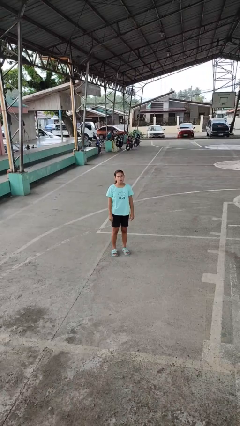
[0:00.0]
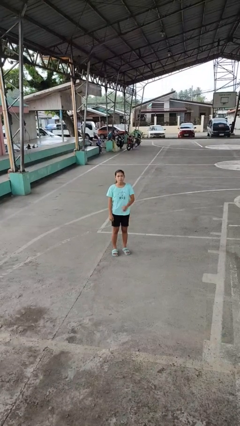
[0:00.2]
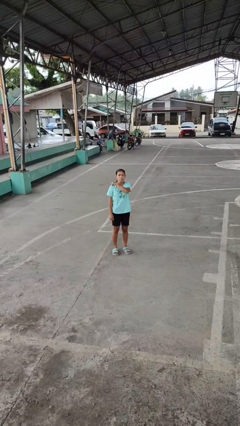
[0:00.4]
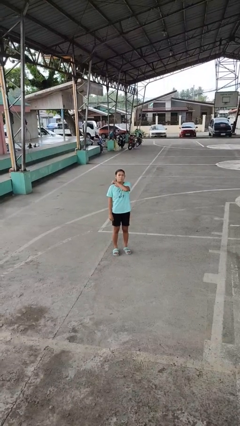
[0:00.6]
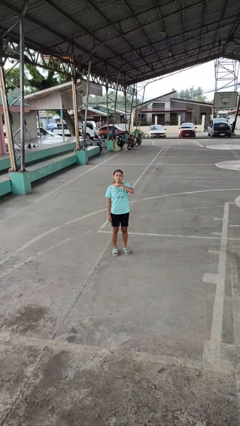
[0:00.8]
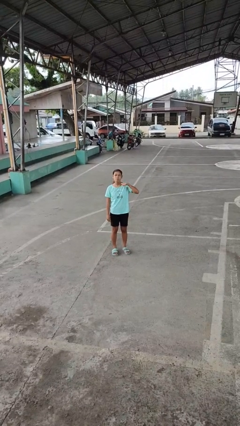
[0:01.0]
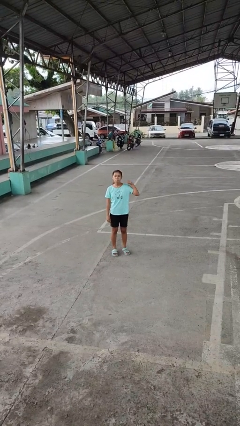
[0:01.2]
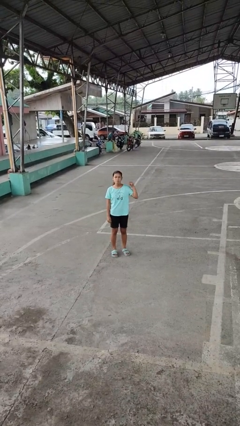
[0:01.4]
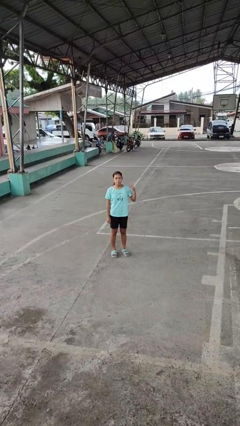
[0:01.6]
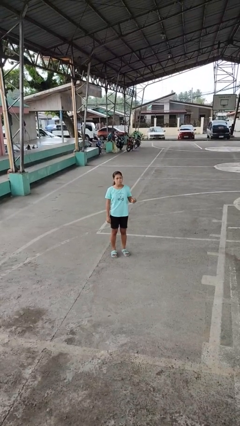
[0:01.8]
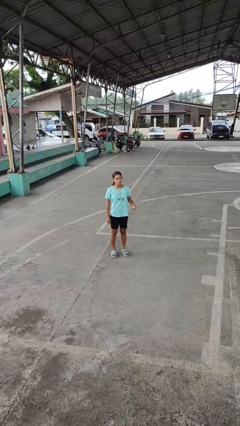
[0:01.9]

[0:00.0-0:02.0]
person gestures cut

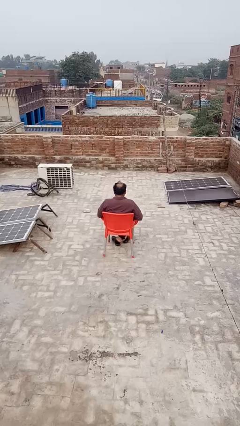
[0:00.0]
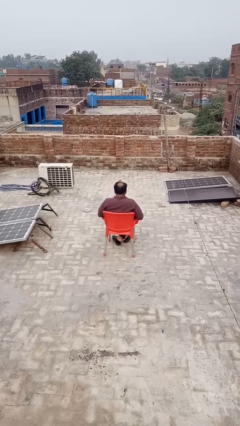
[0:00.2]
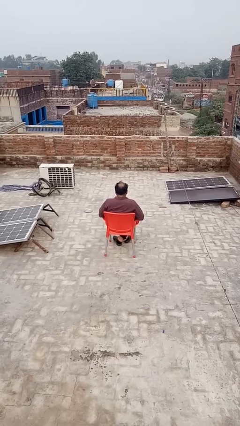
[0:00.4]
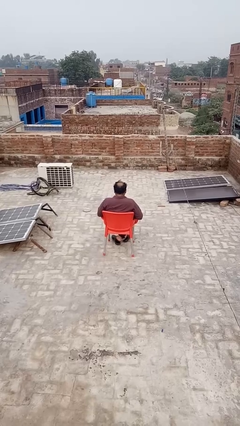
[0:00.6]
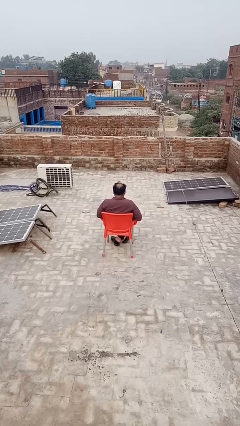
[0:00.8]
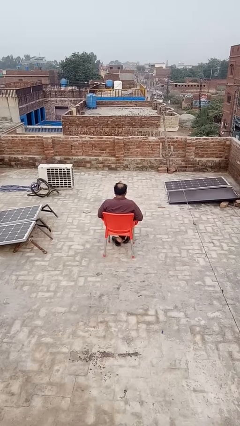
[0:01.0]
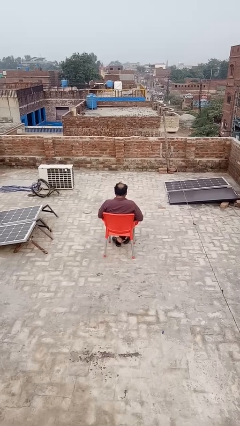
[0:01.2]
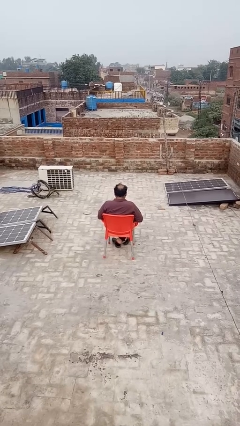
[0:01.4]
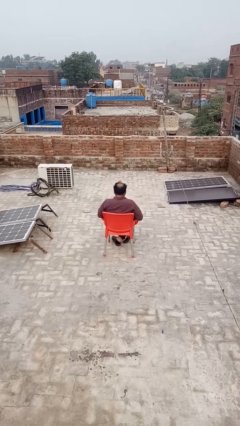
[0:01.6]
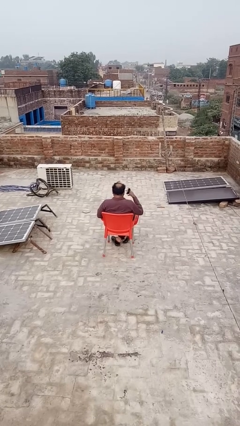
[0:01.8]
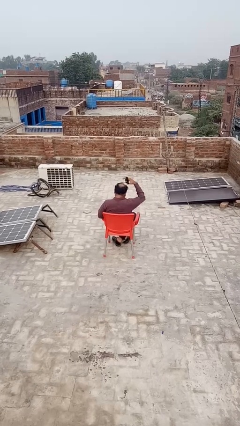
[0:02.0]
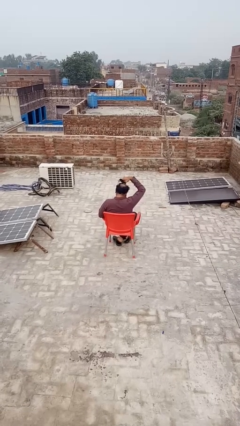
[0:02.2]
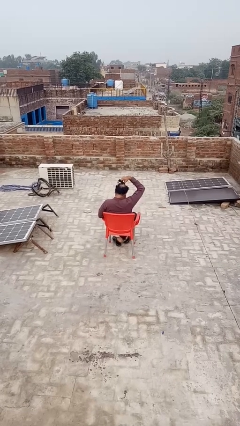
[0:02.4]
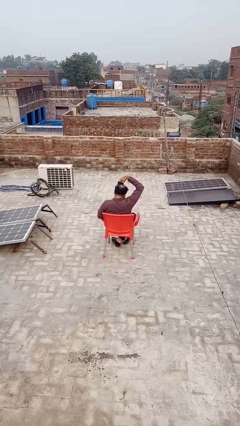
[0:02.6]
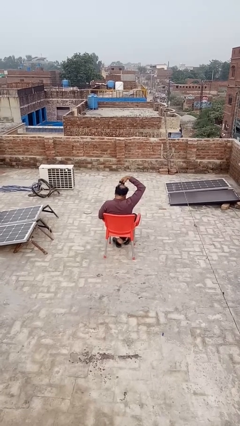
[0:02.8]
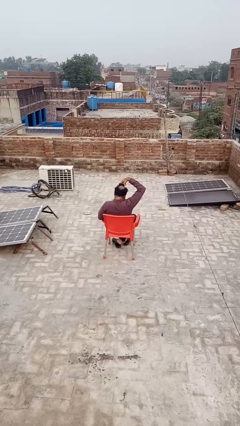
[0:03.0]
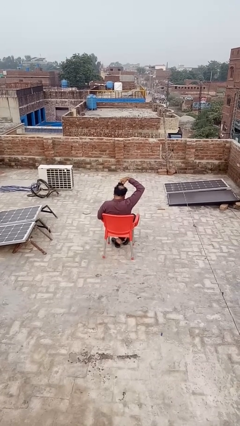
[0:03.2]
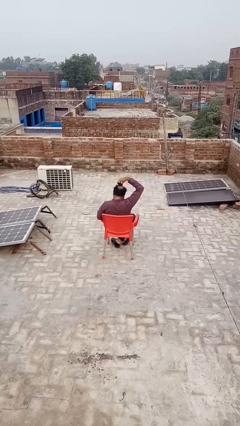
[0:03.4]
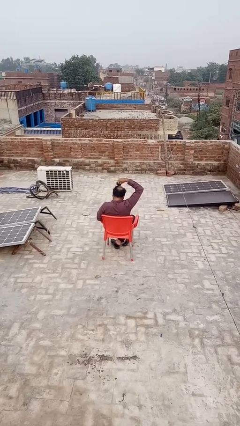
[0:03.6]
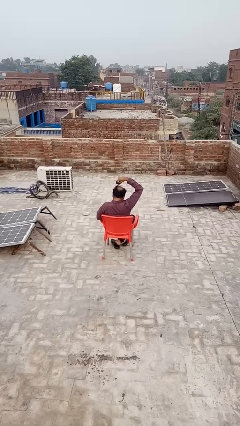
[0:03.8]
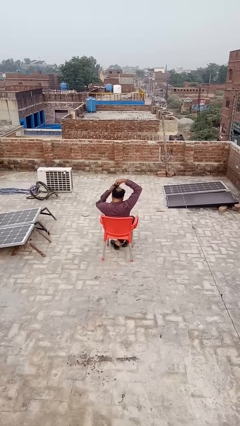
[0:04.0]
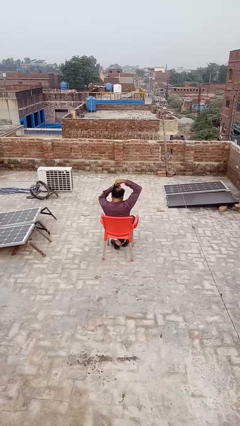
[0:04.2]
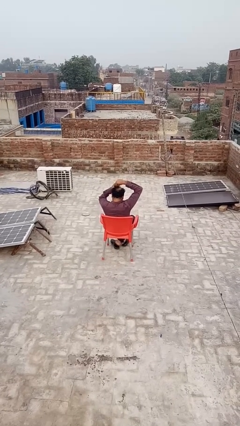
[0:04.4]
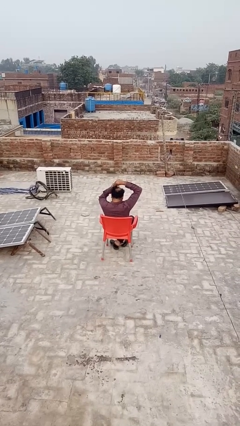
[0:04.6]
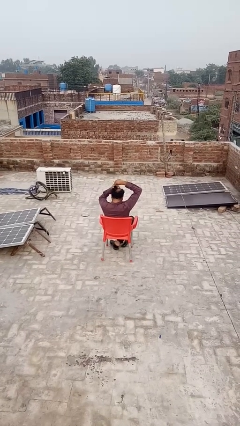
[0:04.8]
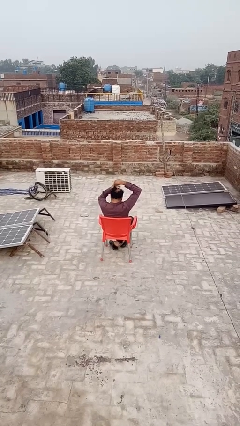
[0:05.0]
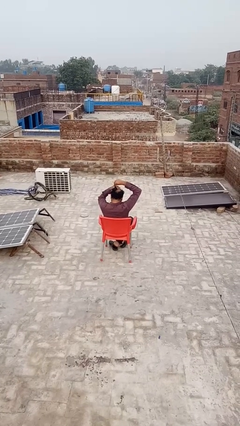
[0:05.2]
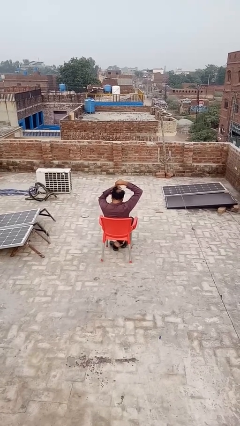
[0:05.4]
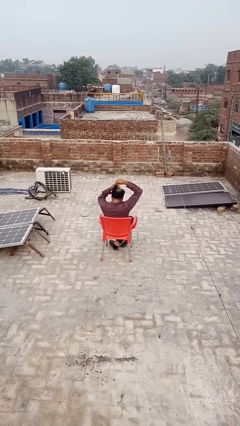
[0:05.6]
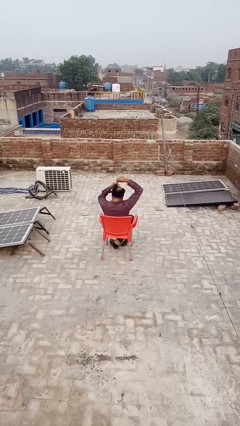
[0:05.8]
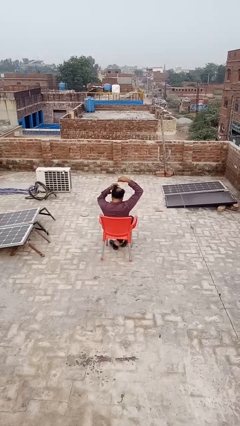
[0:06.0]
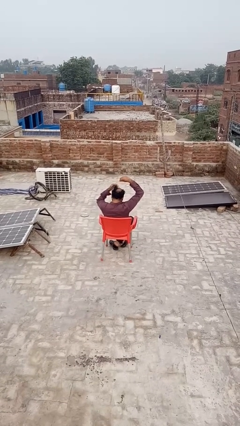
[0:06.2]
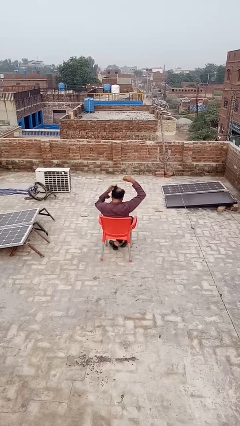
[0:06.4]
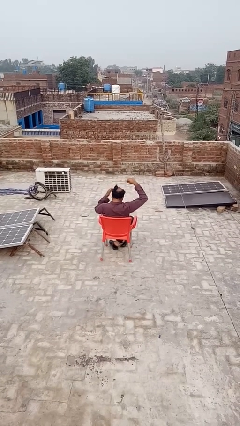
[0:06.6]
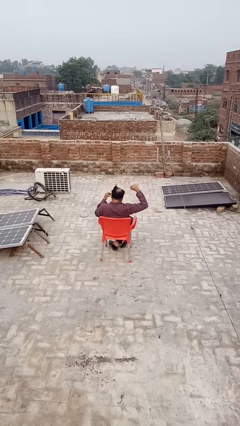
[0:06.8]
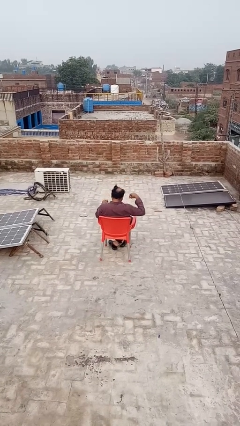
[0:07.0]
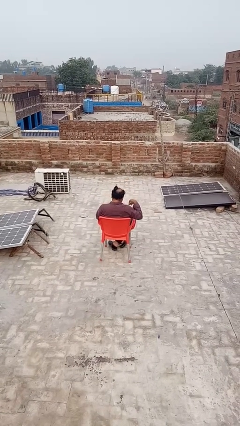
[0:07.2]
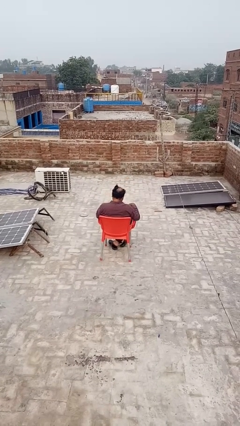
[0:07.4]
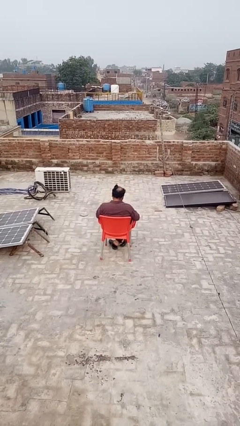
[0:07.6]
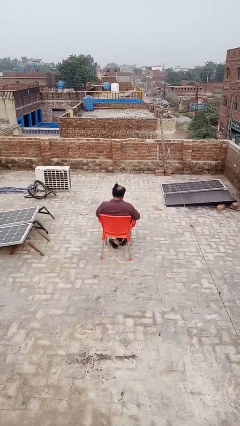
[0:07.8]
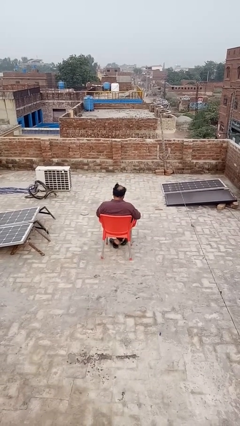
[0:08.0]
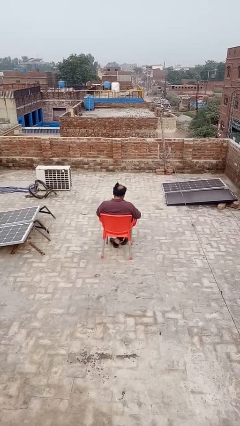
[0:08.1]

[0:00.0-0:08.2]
person puts hair in ponytail

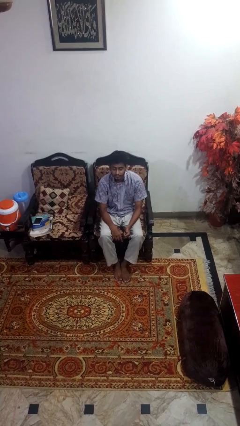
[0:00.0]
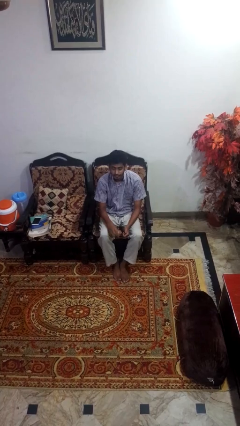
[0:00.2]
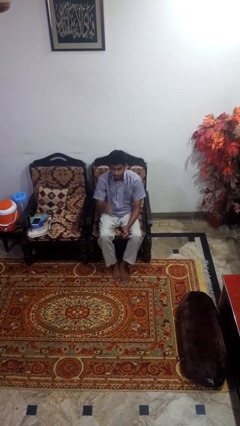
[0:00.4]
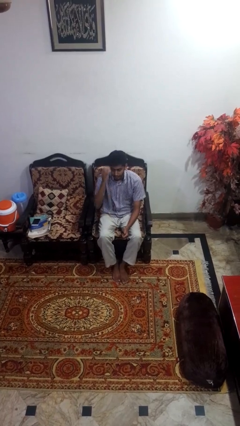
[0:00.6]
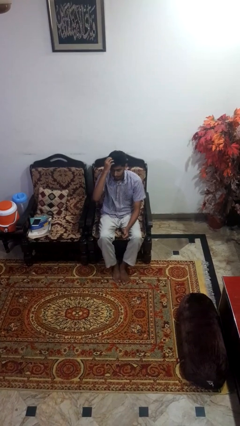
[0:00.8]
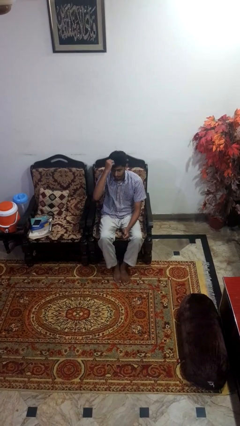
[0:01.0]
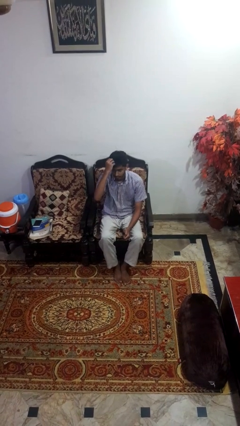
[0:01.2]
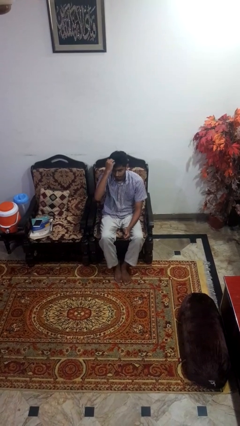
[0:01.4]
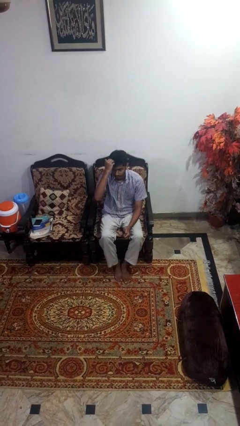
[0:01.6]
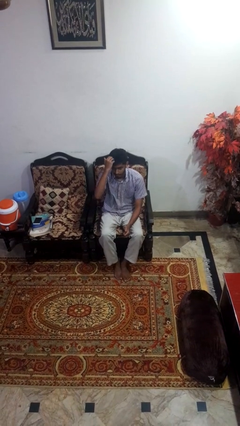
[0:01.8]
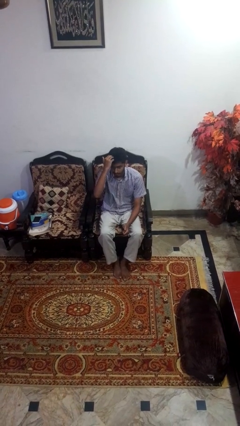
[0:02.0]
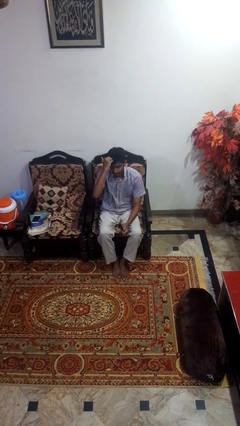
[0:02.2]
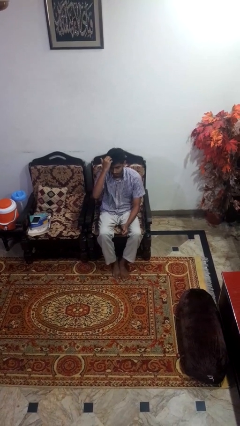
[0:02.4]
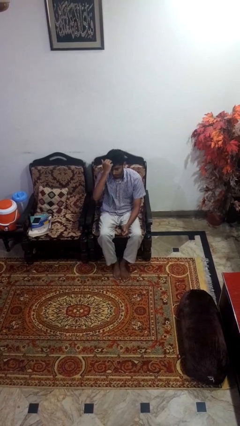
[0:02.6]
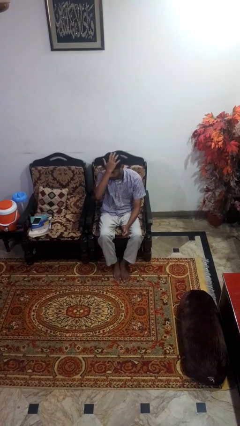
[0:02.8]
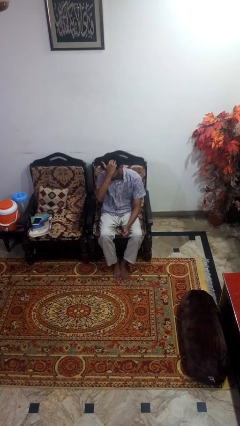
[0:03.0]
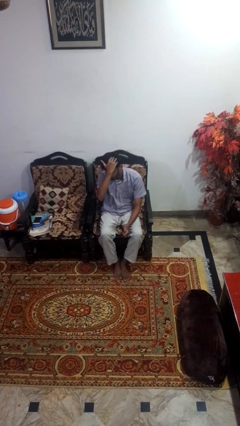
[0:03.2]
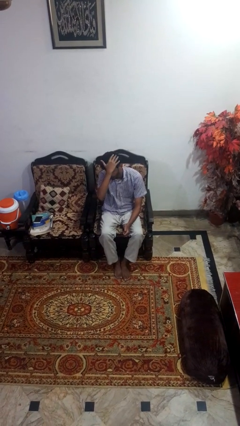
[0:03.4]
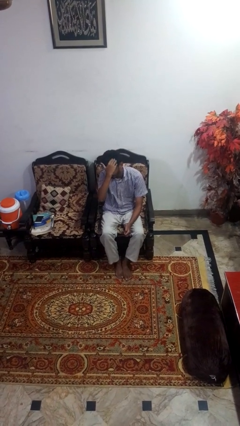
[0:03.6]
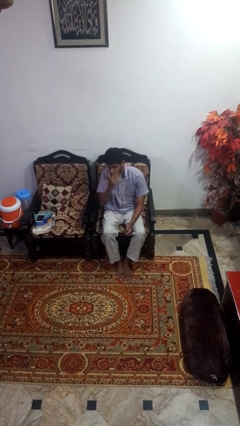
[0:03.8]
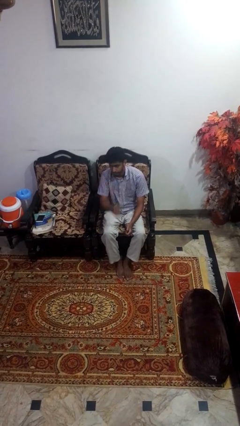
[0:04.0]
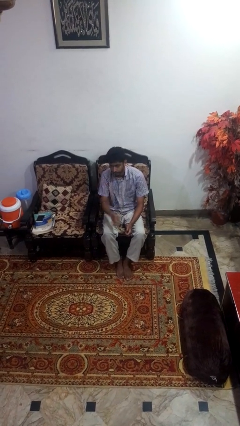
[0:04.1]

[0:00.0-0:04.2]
person scratches face

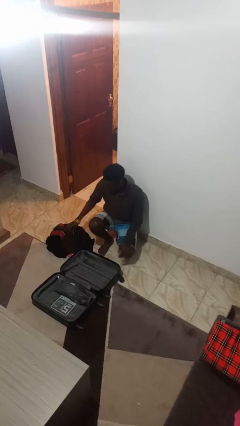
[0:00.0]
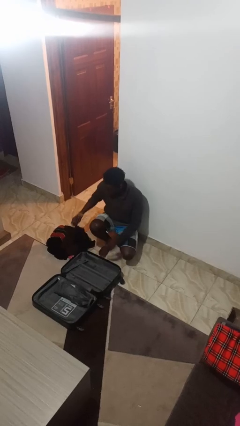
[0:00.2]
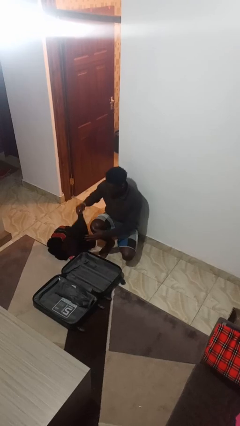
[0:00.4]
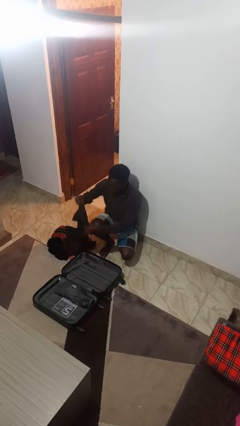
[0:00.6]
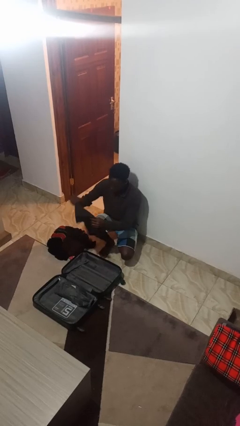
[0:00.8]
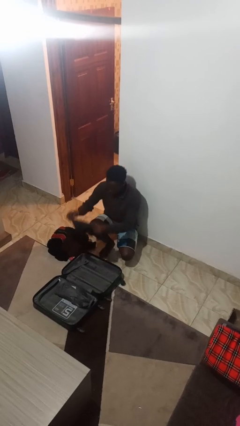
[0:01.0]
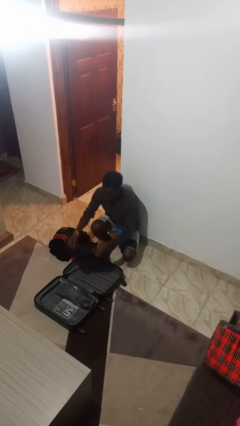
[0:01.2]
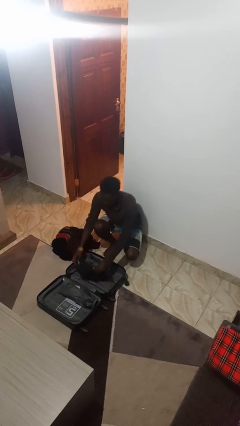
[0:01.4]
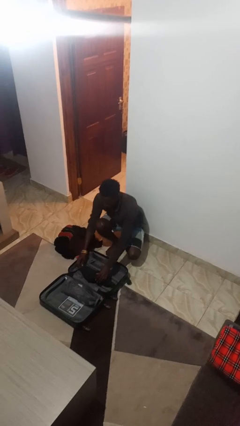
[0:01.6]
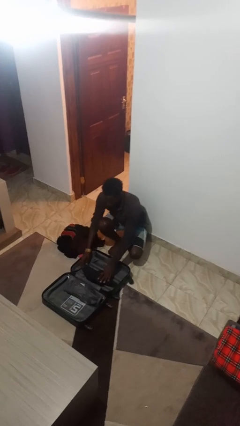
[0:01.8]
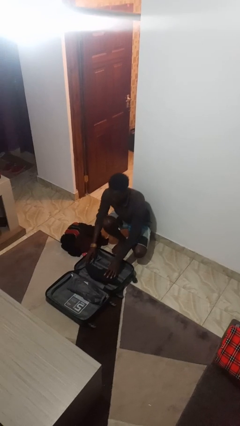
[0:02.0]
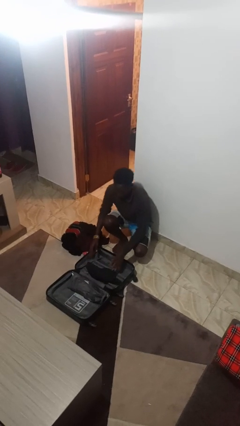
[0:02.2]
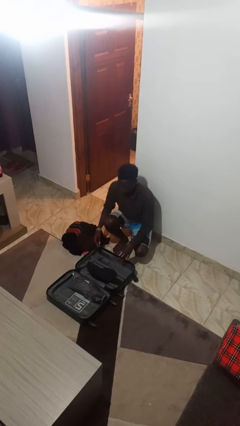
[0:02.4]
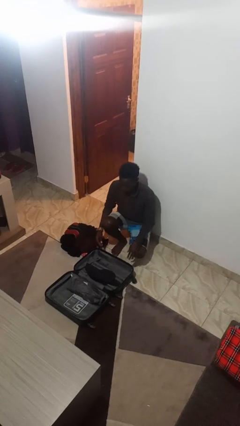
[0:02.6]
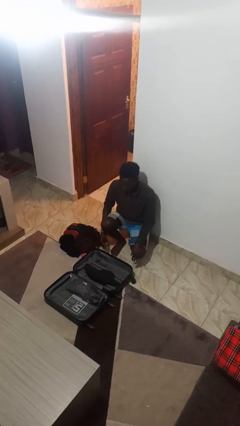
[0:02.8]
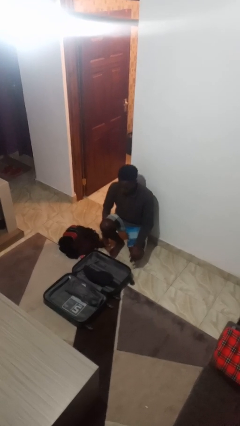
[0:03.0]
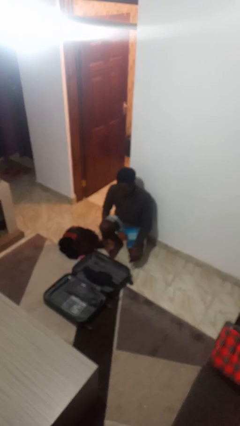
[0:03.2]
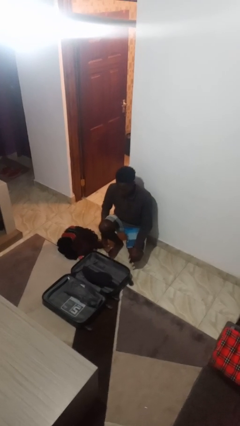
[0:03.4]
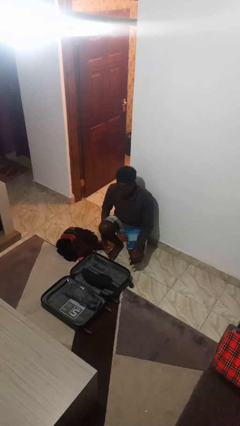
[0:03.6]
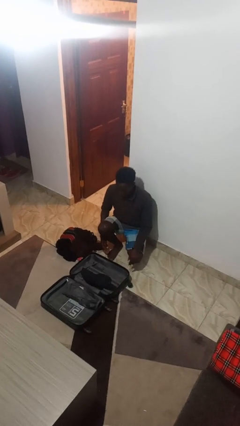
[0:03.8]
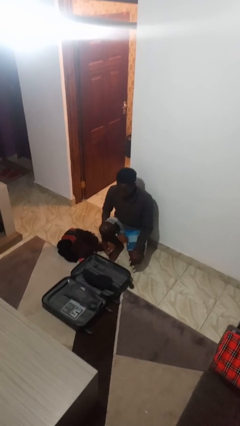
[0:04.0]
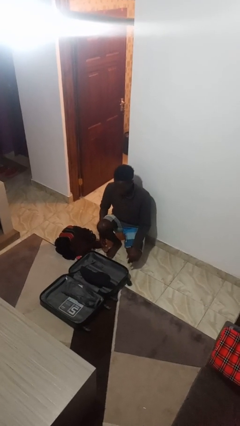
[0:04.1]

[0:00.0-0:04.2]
person loads clothes into suitcase
